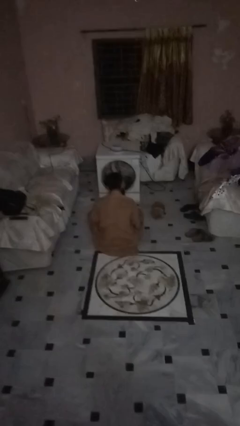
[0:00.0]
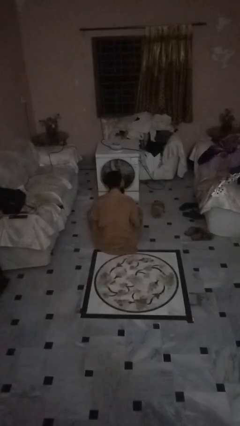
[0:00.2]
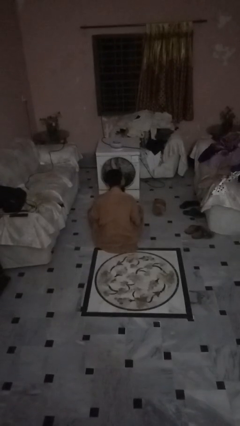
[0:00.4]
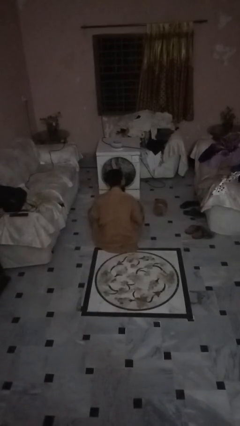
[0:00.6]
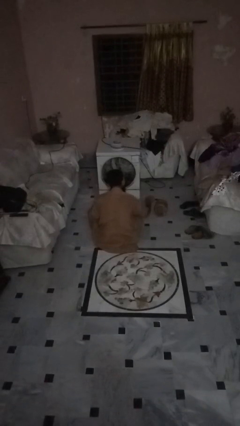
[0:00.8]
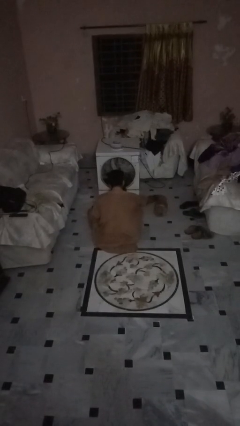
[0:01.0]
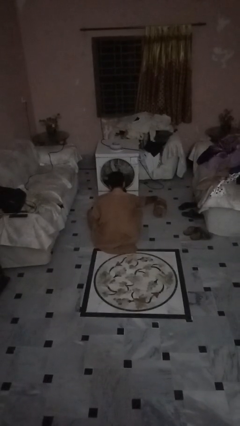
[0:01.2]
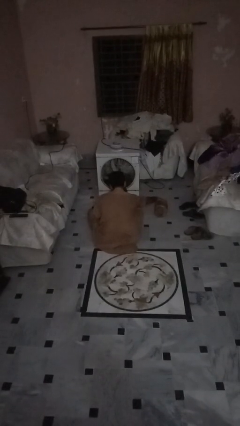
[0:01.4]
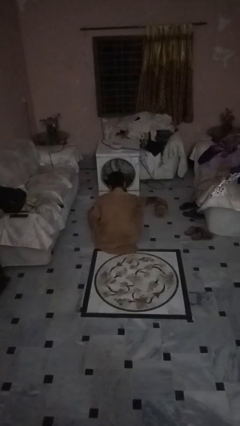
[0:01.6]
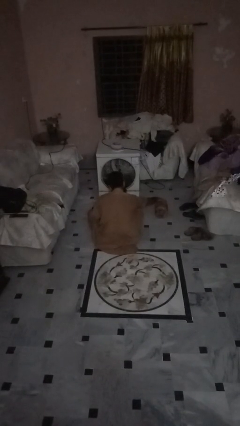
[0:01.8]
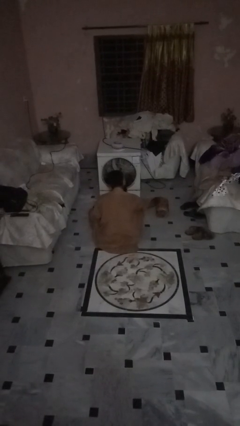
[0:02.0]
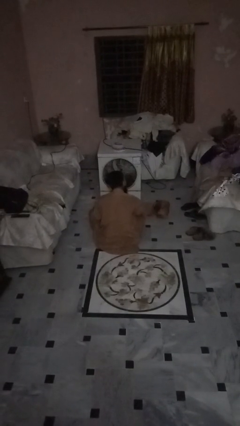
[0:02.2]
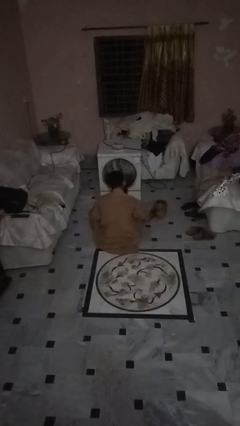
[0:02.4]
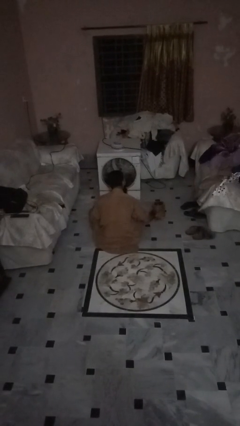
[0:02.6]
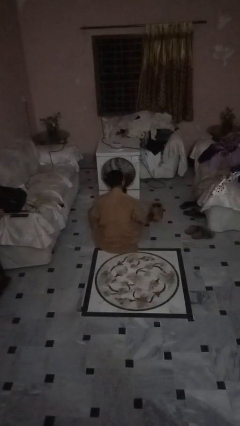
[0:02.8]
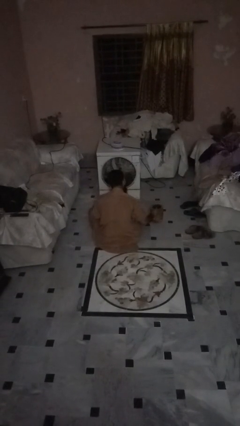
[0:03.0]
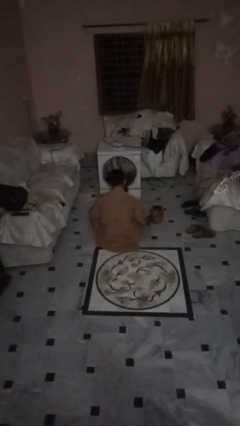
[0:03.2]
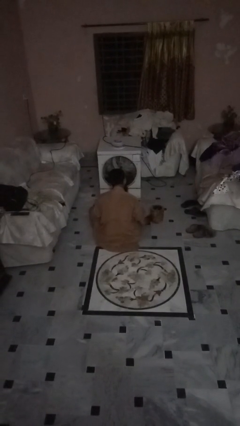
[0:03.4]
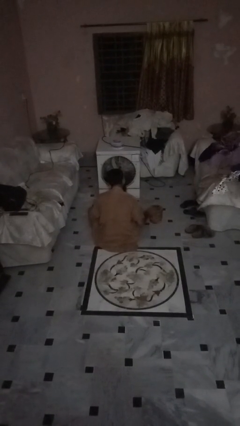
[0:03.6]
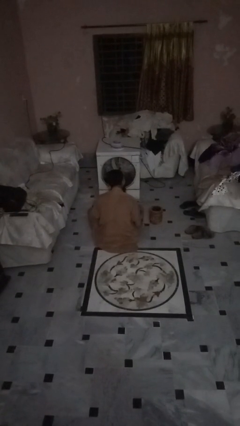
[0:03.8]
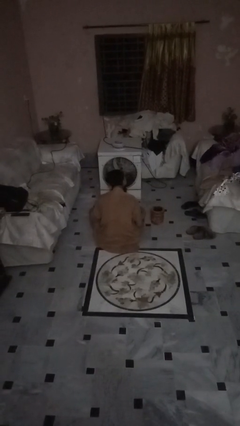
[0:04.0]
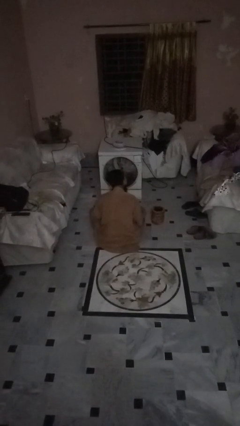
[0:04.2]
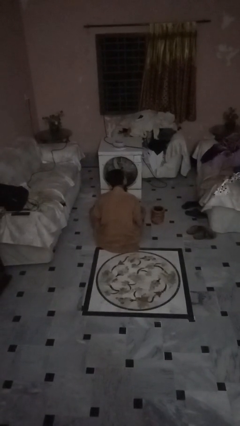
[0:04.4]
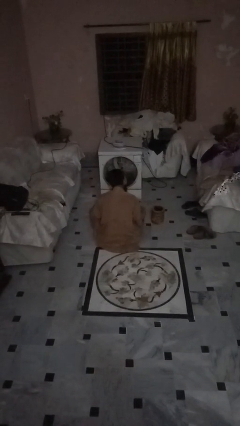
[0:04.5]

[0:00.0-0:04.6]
person sets upright furniture

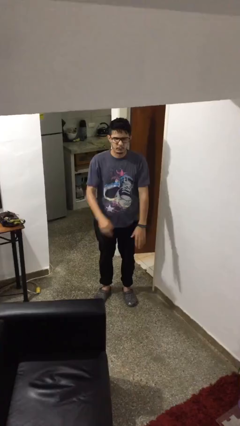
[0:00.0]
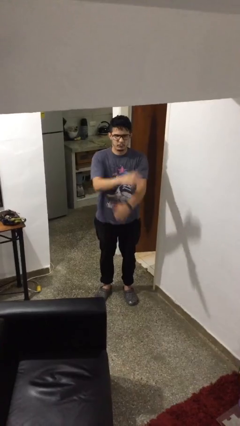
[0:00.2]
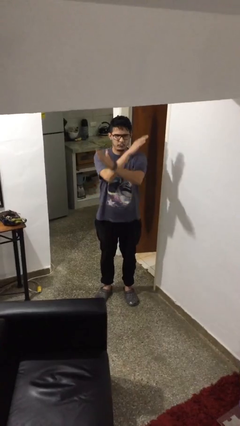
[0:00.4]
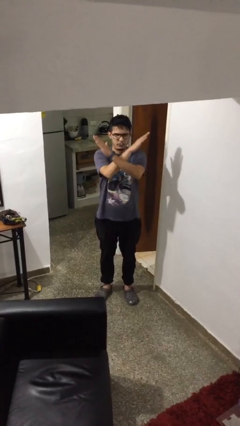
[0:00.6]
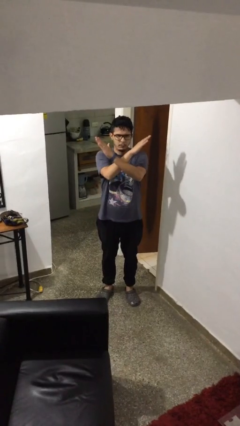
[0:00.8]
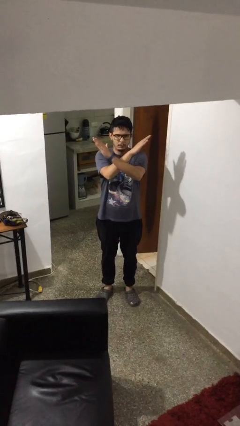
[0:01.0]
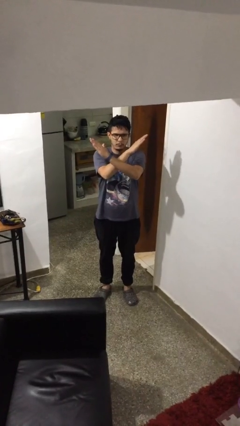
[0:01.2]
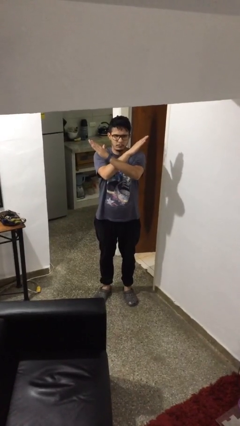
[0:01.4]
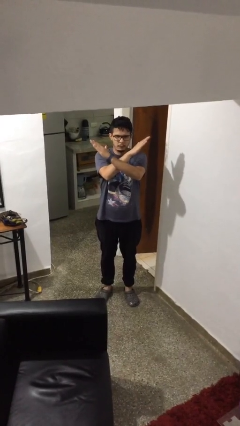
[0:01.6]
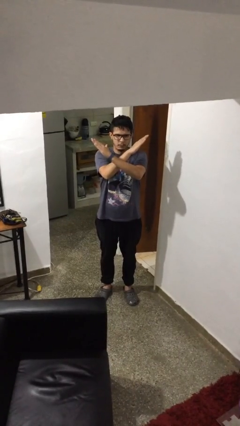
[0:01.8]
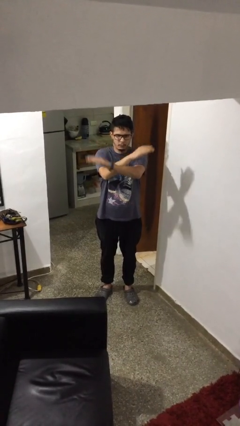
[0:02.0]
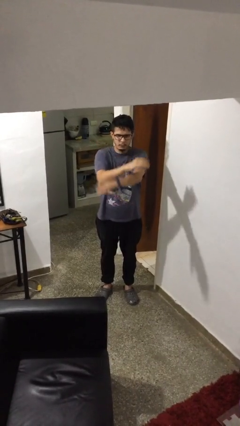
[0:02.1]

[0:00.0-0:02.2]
person gestures arms x

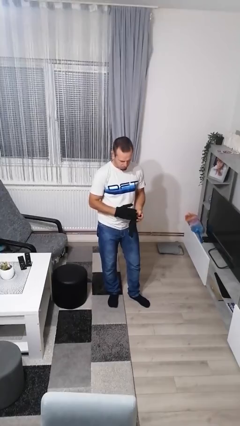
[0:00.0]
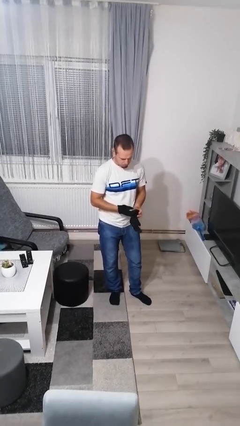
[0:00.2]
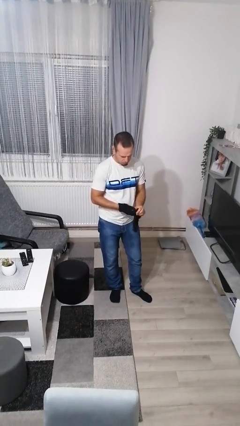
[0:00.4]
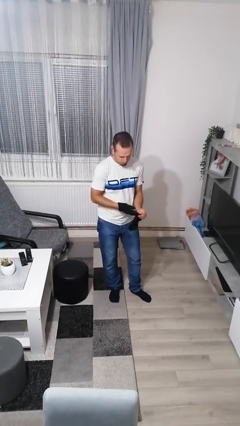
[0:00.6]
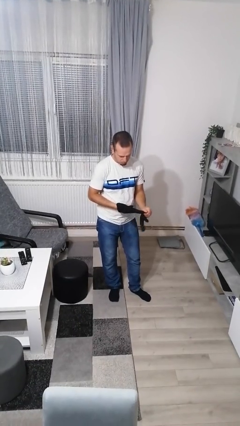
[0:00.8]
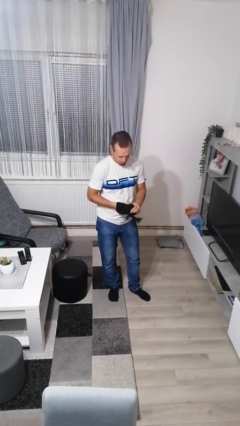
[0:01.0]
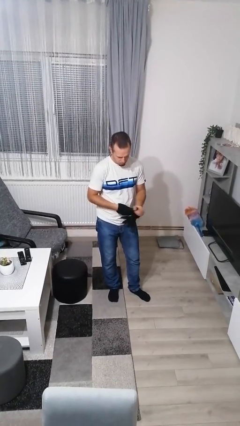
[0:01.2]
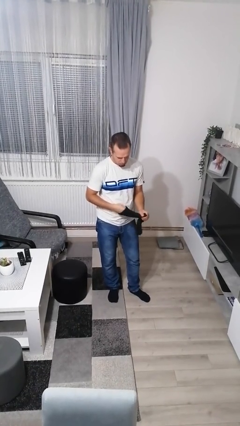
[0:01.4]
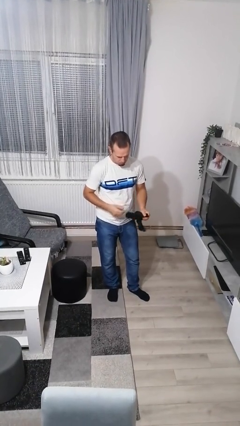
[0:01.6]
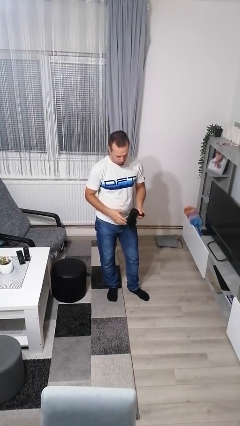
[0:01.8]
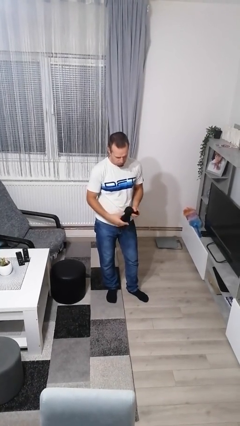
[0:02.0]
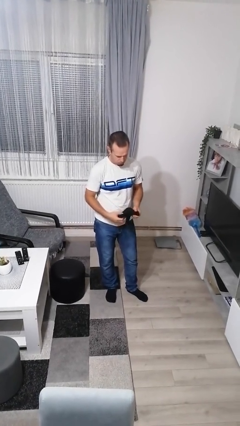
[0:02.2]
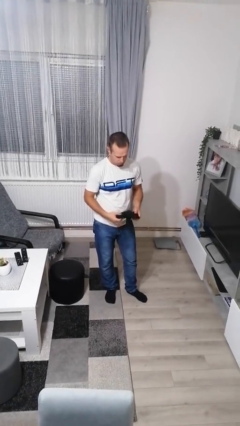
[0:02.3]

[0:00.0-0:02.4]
person takes off gloves

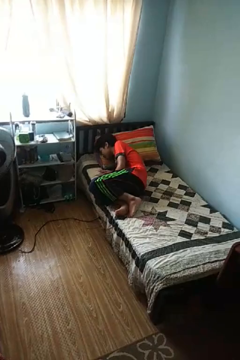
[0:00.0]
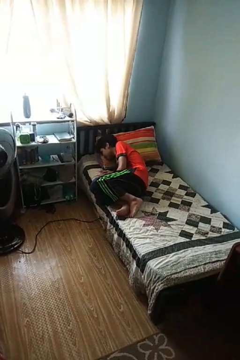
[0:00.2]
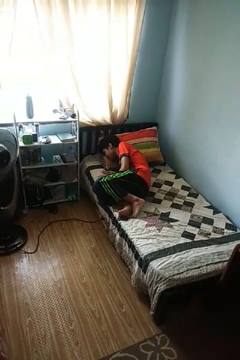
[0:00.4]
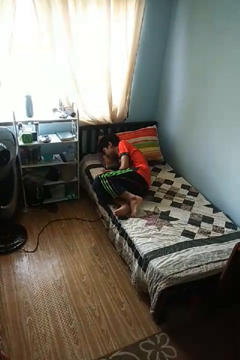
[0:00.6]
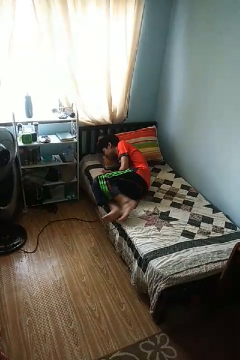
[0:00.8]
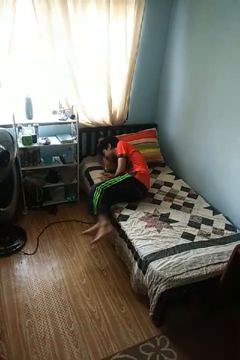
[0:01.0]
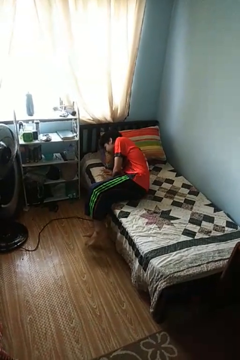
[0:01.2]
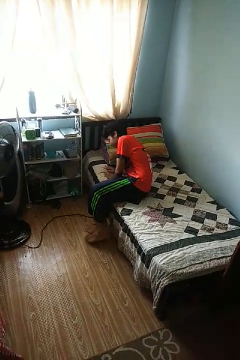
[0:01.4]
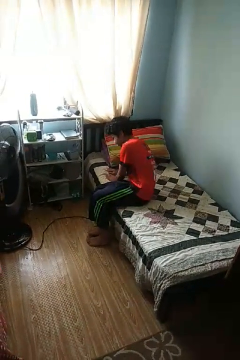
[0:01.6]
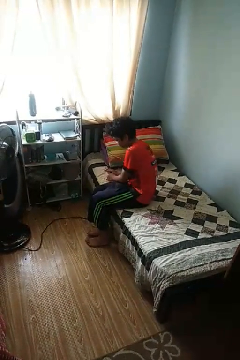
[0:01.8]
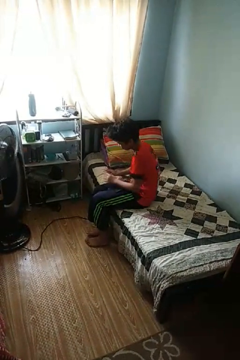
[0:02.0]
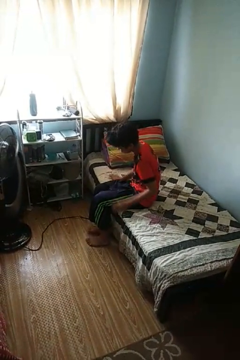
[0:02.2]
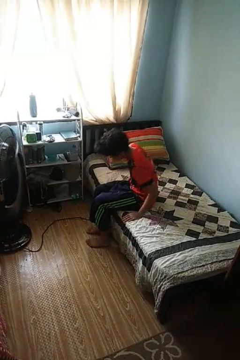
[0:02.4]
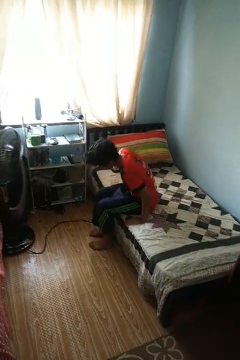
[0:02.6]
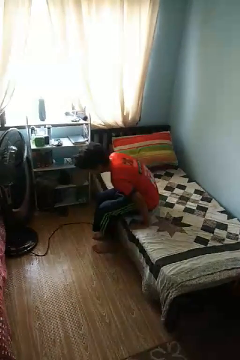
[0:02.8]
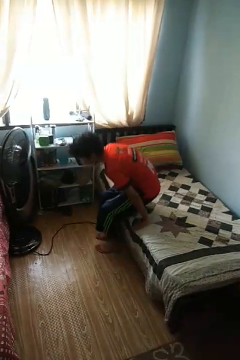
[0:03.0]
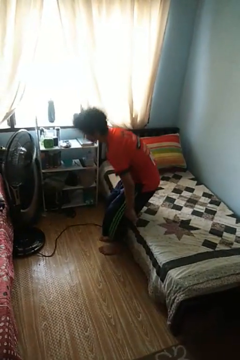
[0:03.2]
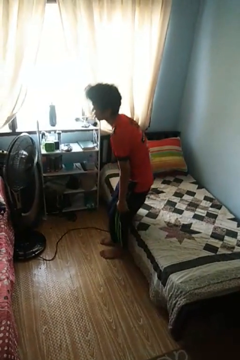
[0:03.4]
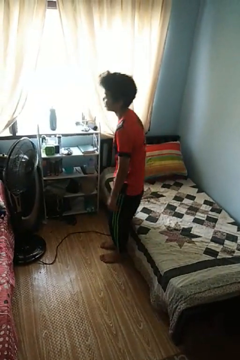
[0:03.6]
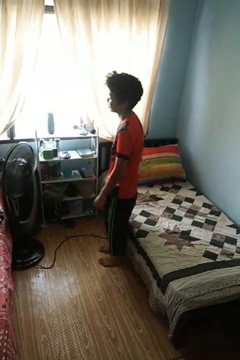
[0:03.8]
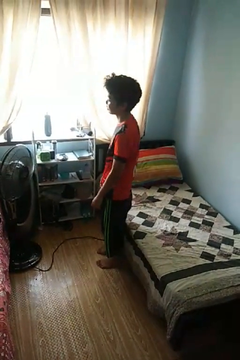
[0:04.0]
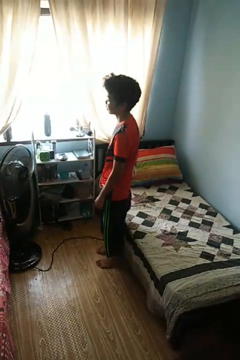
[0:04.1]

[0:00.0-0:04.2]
person stands up

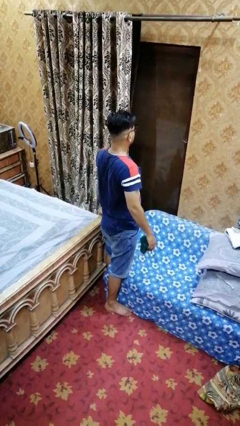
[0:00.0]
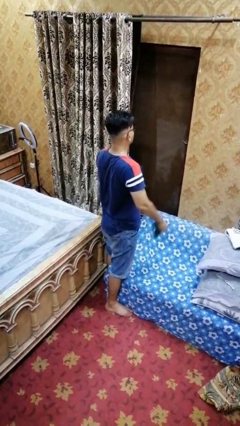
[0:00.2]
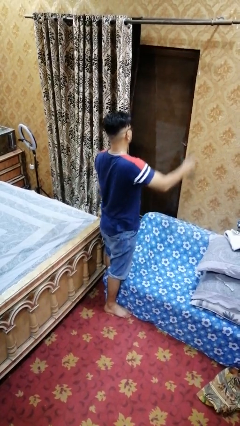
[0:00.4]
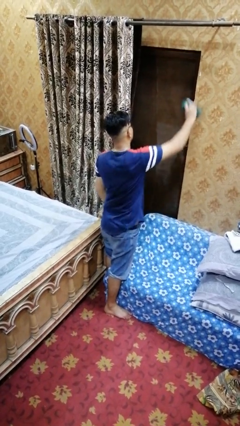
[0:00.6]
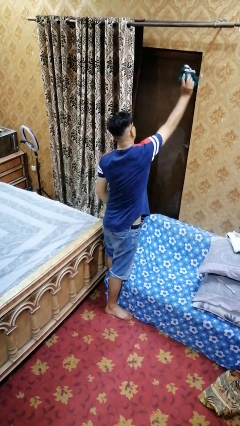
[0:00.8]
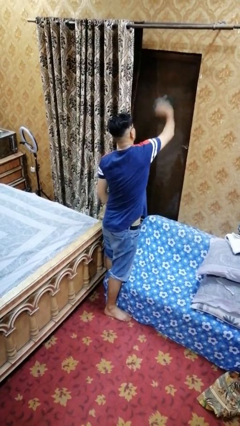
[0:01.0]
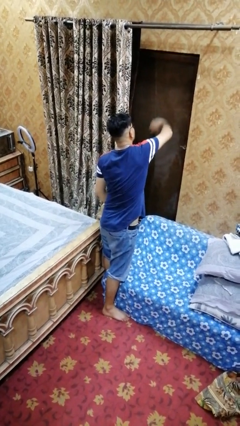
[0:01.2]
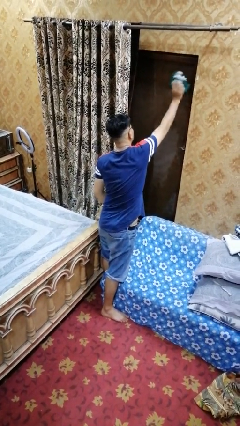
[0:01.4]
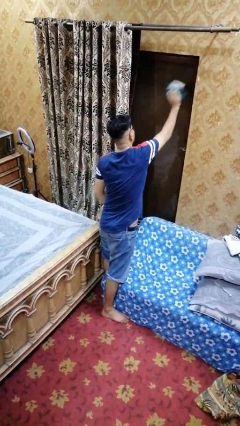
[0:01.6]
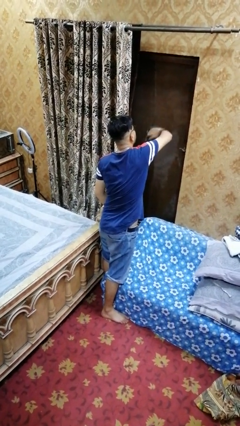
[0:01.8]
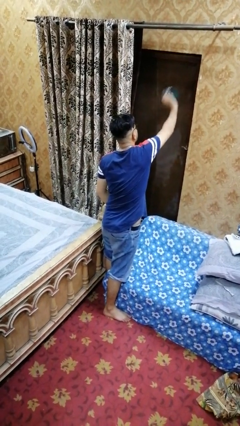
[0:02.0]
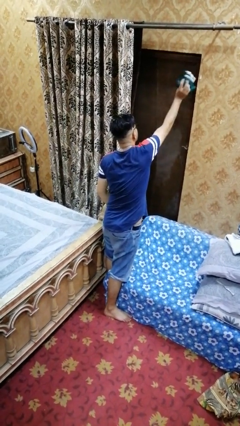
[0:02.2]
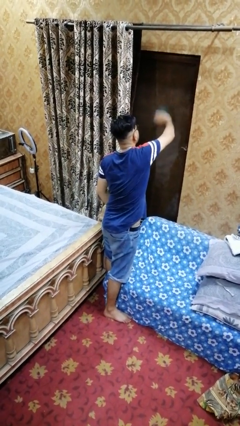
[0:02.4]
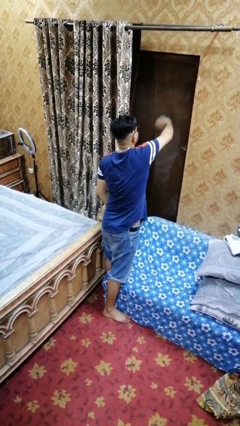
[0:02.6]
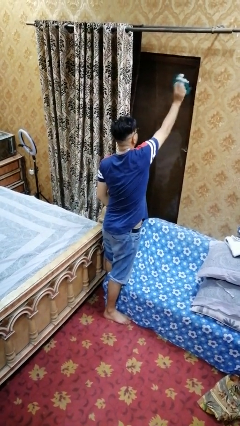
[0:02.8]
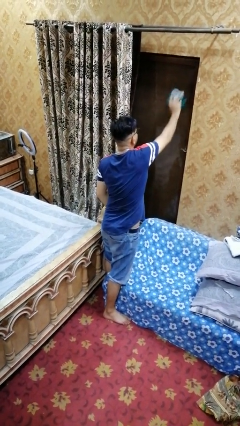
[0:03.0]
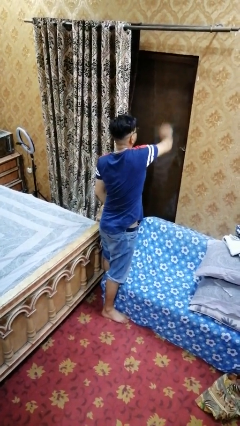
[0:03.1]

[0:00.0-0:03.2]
person washes window

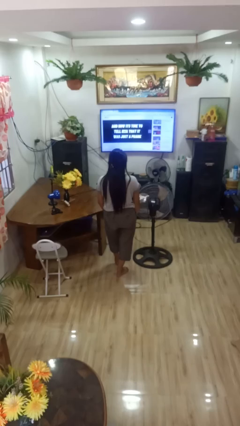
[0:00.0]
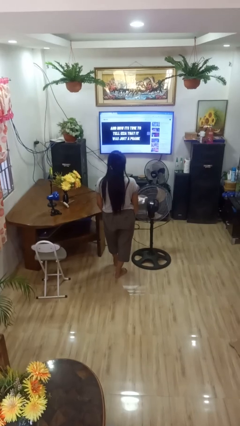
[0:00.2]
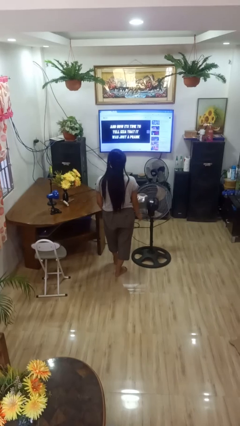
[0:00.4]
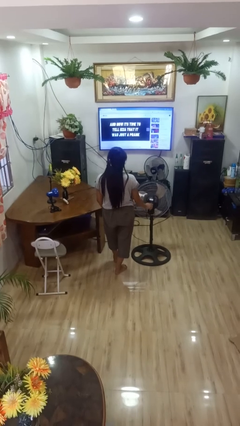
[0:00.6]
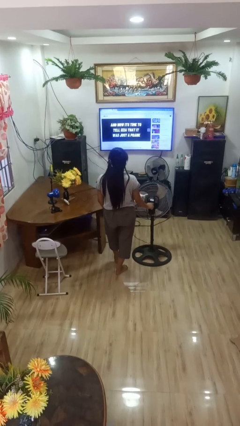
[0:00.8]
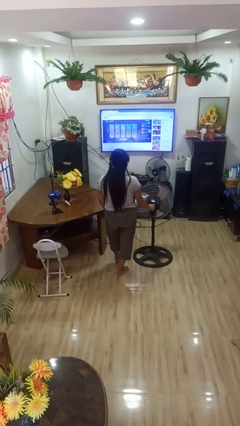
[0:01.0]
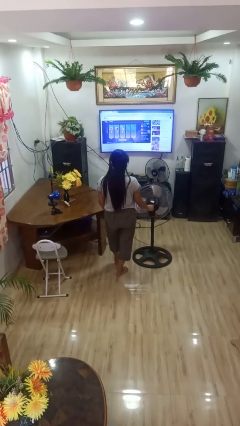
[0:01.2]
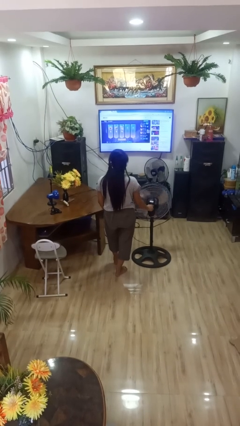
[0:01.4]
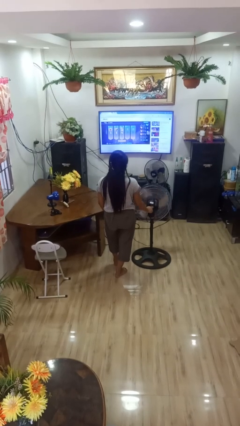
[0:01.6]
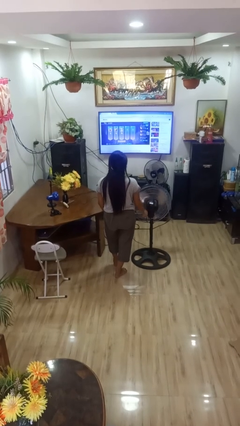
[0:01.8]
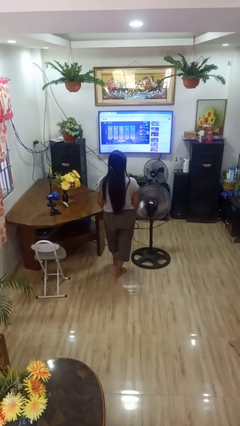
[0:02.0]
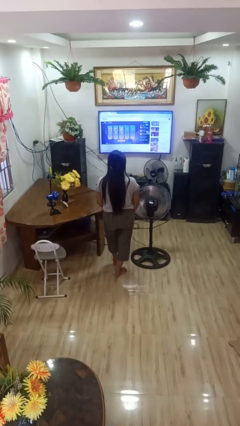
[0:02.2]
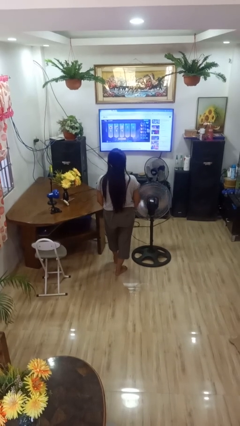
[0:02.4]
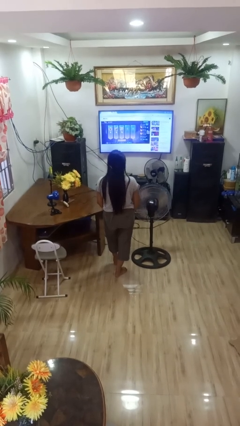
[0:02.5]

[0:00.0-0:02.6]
person turns on fan
